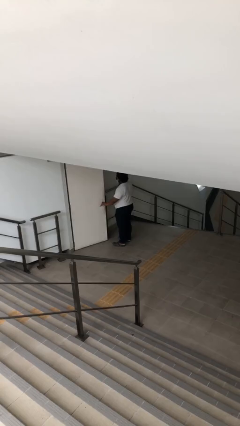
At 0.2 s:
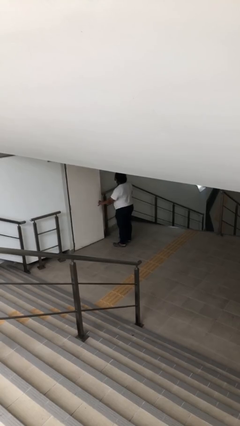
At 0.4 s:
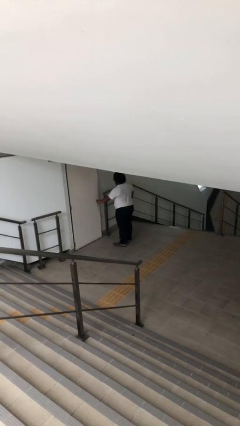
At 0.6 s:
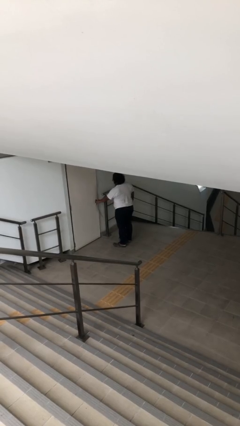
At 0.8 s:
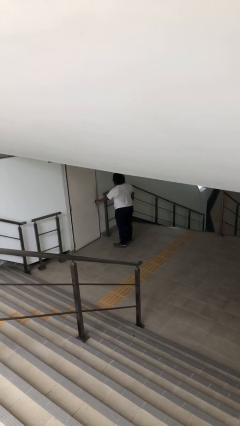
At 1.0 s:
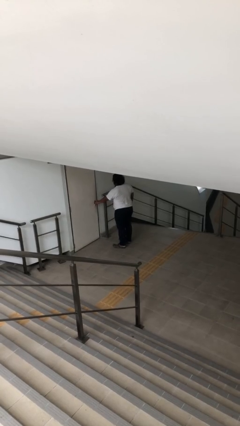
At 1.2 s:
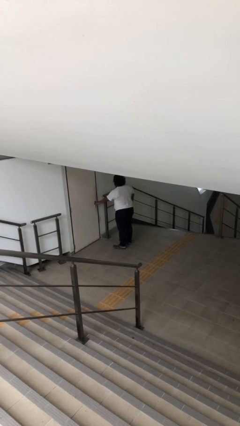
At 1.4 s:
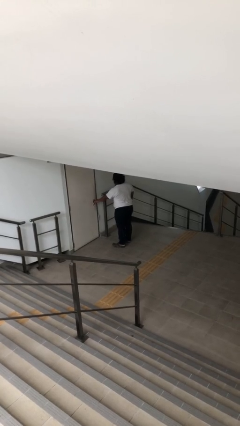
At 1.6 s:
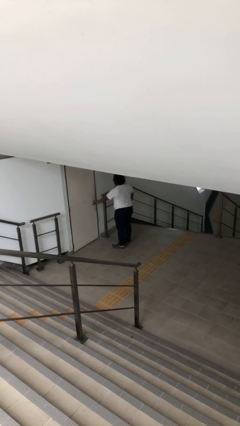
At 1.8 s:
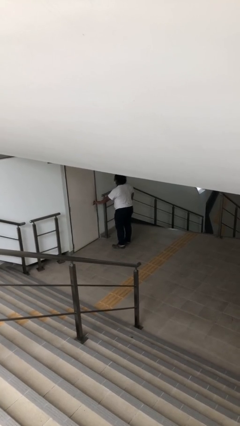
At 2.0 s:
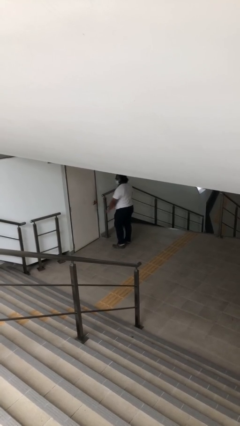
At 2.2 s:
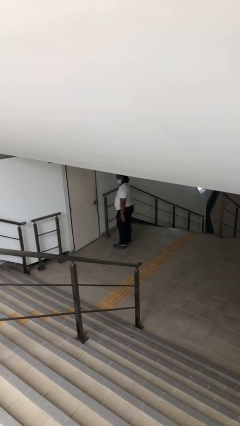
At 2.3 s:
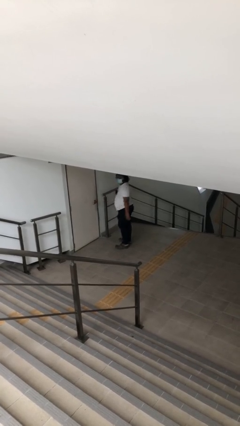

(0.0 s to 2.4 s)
person closes facility door

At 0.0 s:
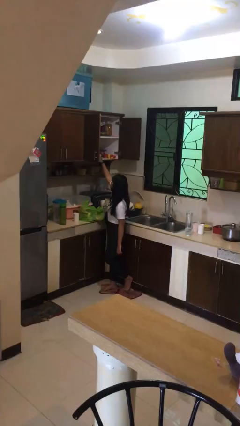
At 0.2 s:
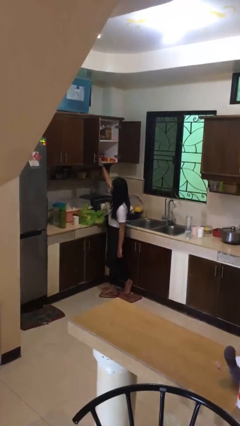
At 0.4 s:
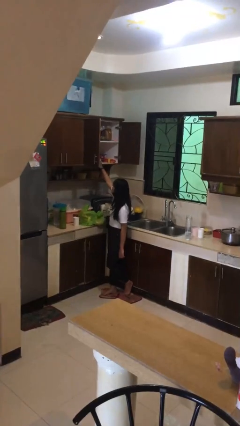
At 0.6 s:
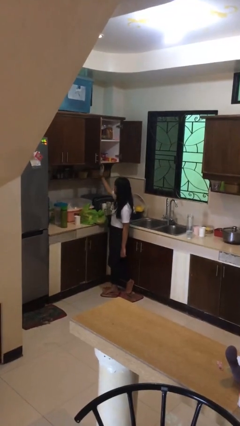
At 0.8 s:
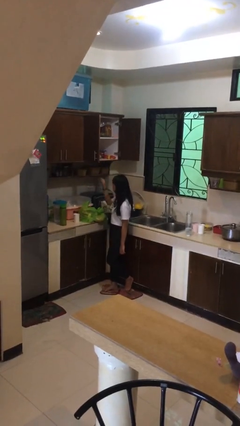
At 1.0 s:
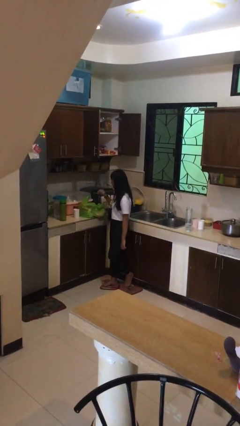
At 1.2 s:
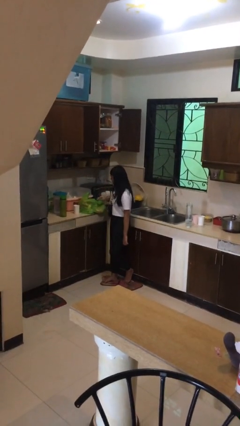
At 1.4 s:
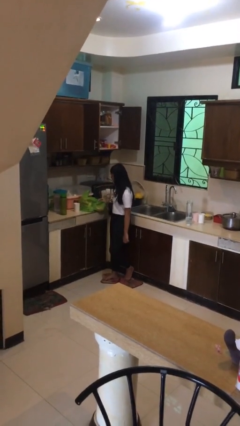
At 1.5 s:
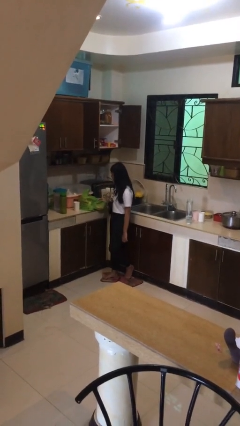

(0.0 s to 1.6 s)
person loads groceries into cabinet

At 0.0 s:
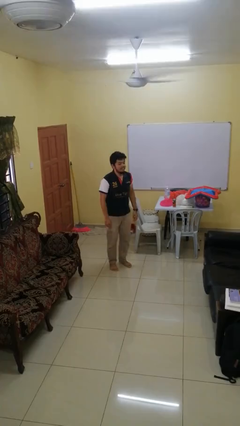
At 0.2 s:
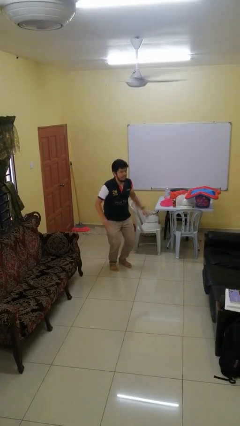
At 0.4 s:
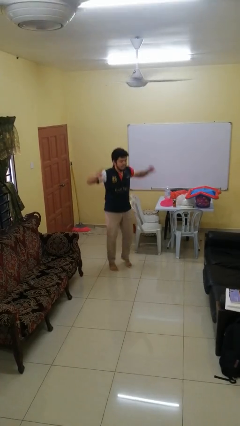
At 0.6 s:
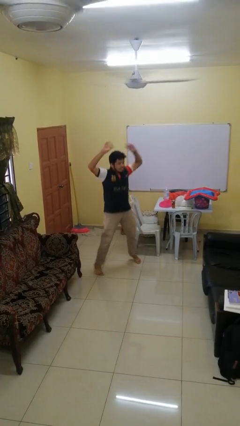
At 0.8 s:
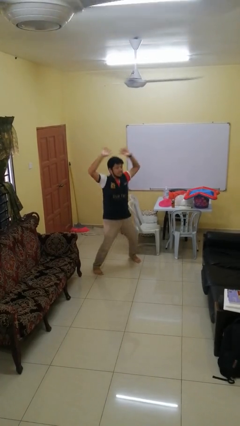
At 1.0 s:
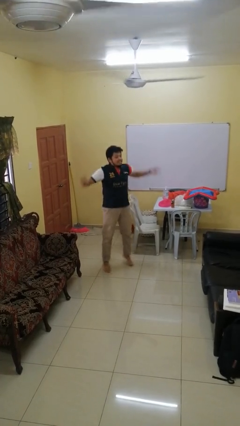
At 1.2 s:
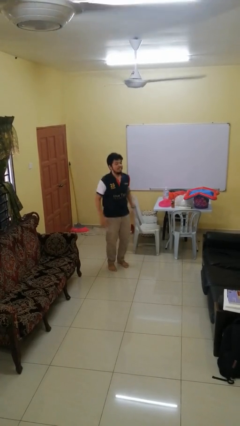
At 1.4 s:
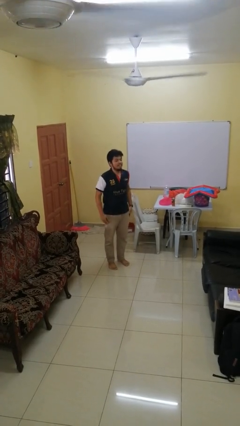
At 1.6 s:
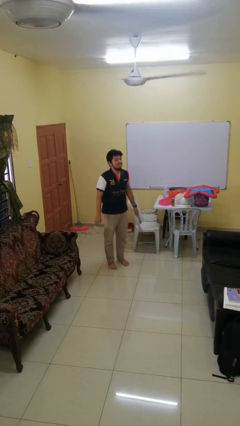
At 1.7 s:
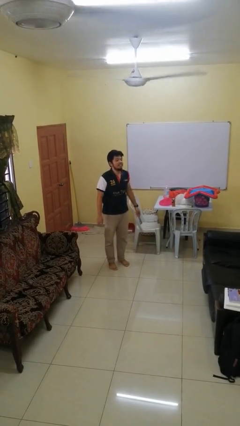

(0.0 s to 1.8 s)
person exercises with jumping jacks

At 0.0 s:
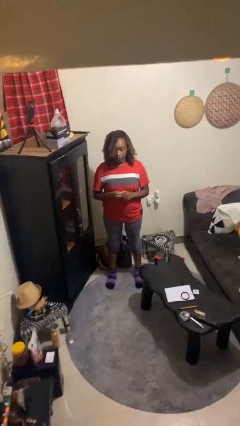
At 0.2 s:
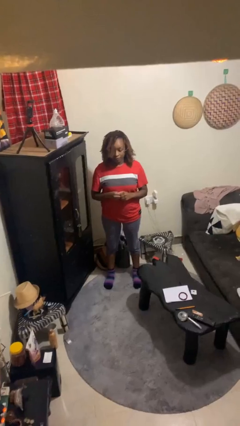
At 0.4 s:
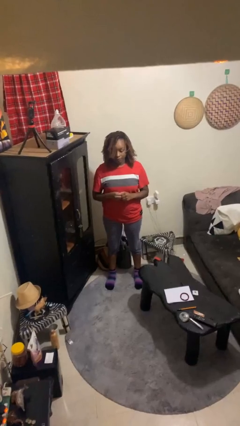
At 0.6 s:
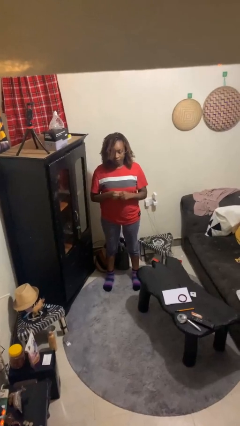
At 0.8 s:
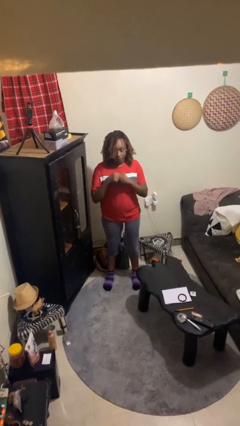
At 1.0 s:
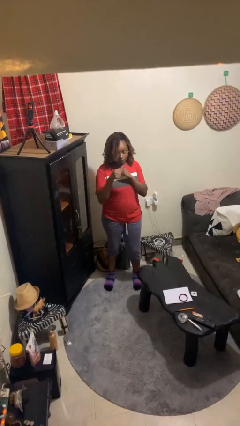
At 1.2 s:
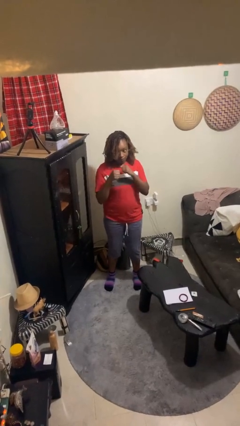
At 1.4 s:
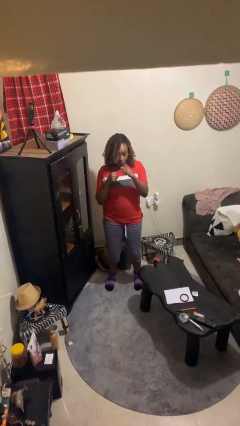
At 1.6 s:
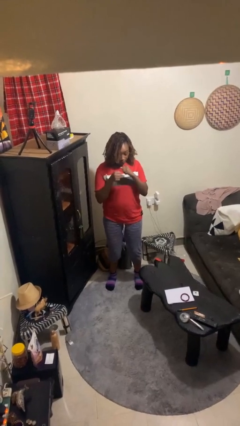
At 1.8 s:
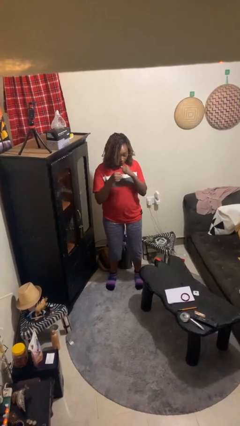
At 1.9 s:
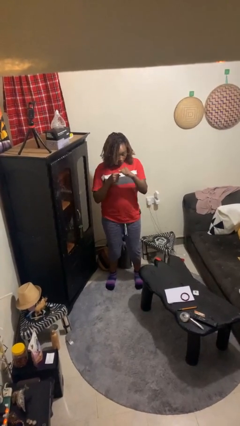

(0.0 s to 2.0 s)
person punches

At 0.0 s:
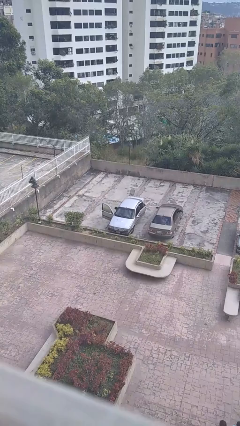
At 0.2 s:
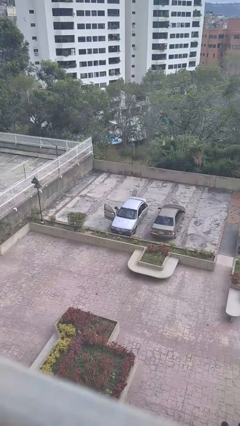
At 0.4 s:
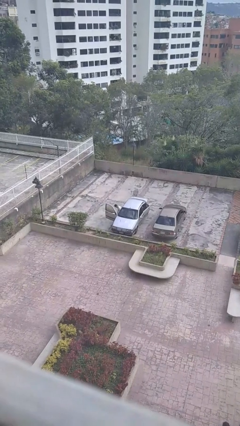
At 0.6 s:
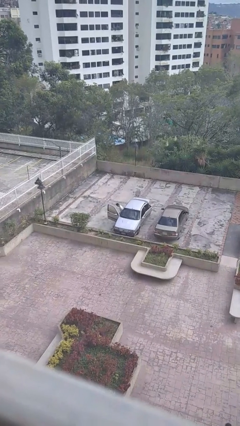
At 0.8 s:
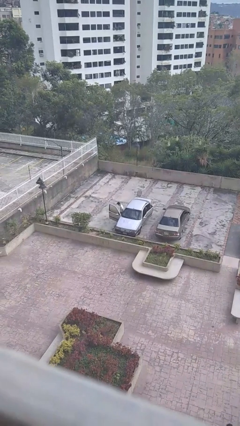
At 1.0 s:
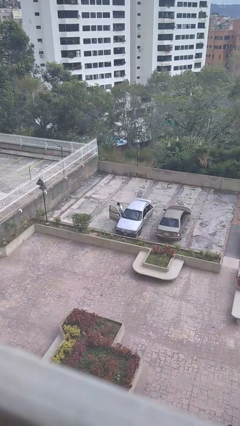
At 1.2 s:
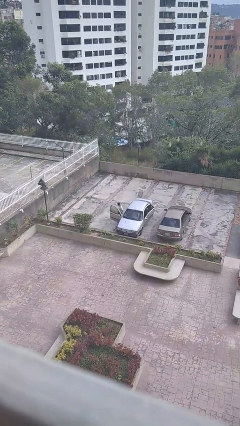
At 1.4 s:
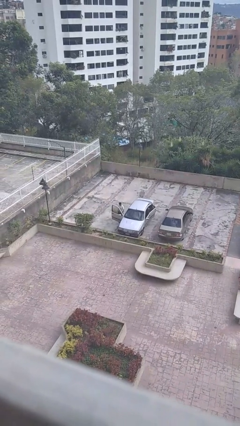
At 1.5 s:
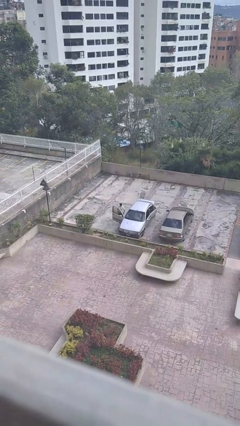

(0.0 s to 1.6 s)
person exits car

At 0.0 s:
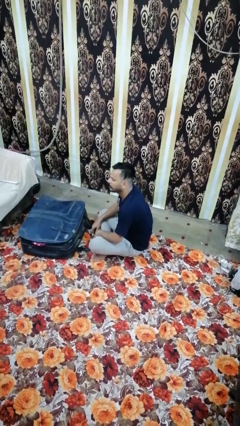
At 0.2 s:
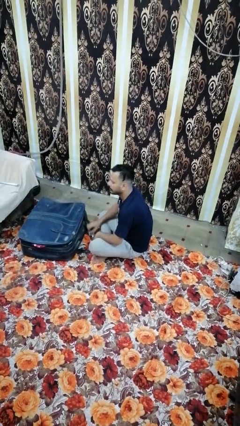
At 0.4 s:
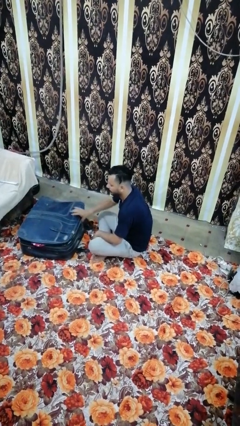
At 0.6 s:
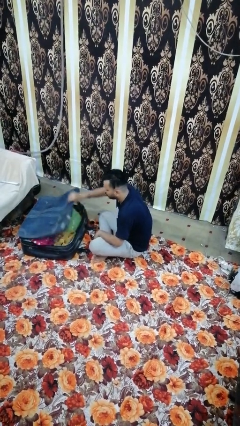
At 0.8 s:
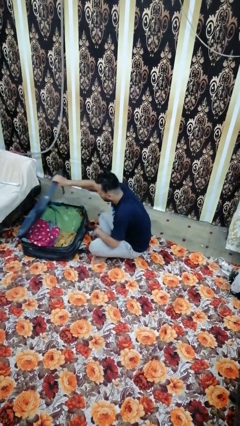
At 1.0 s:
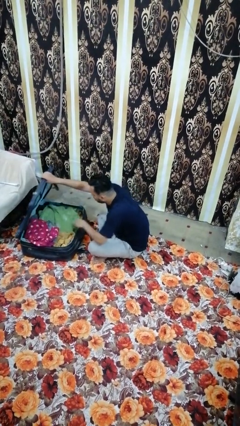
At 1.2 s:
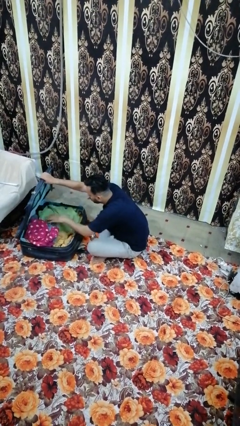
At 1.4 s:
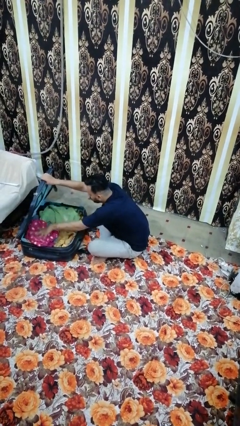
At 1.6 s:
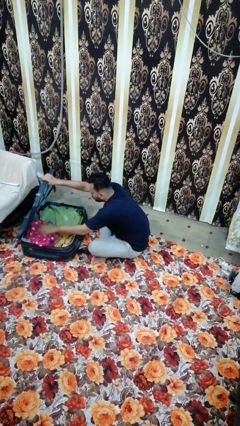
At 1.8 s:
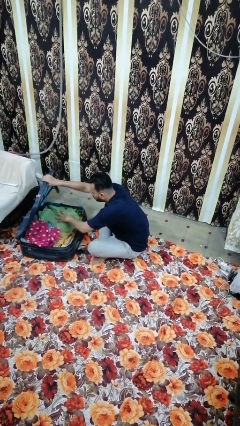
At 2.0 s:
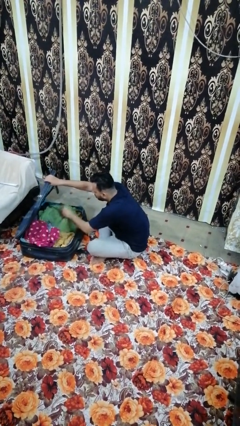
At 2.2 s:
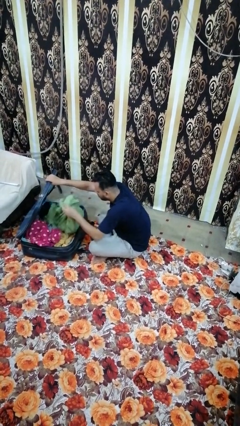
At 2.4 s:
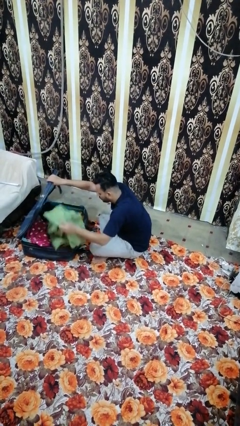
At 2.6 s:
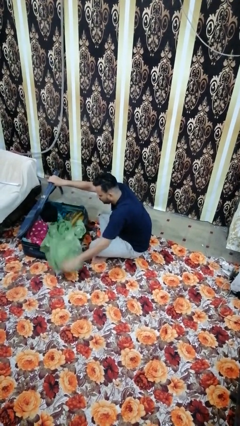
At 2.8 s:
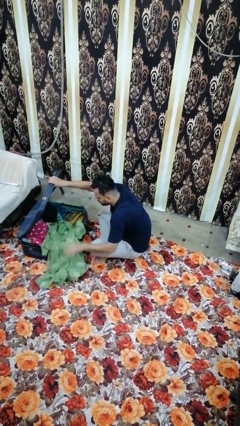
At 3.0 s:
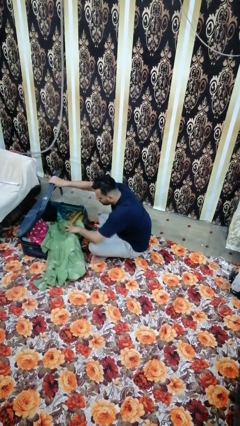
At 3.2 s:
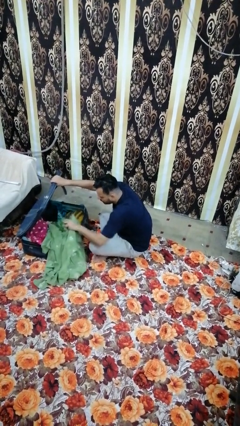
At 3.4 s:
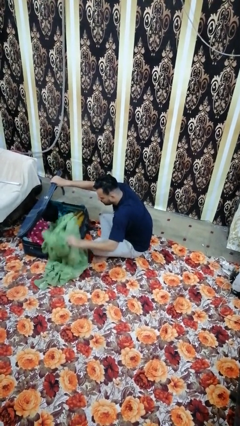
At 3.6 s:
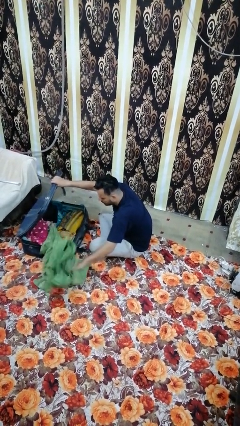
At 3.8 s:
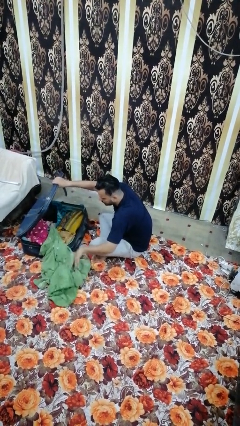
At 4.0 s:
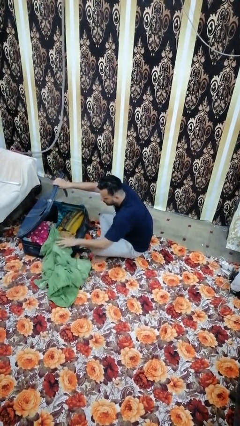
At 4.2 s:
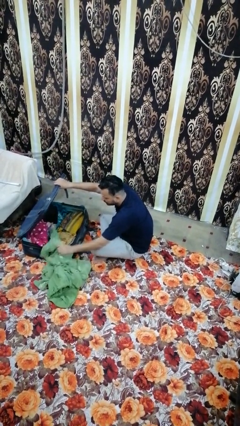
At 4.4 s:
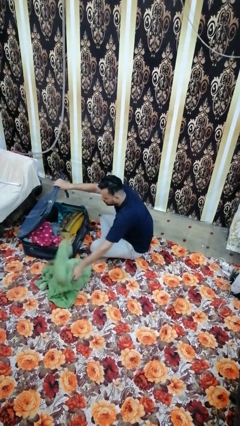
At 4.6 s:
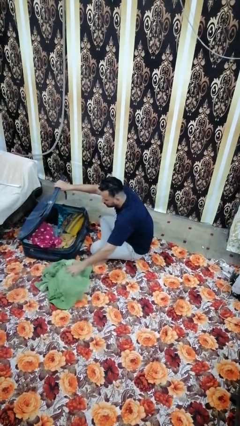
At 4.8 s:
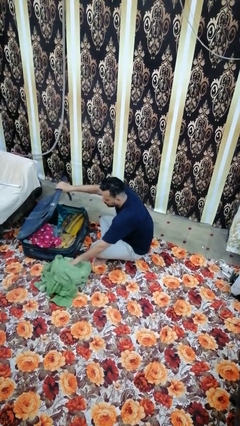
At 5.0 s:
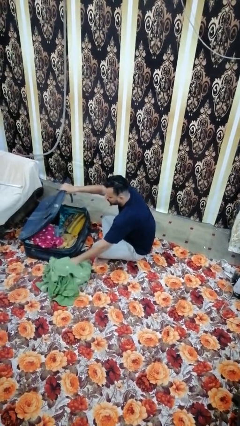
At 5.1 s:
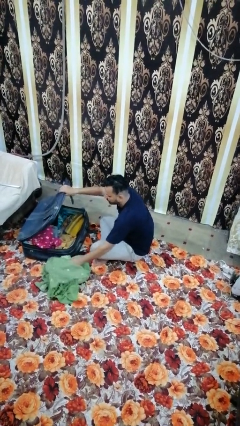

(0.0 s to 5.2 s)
person unloads clothes from suitcase

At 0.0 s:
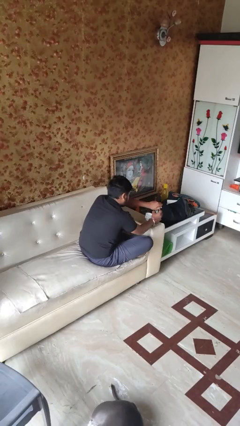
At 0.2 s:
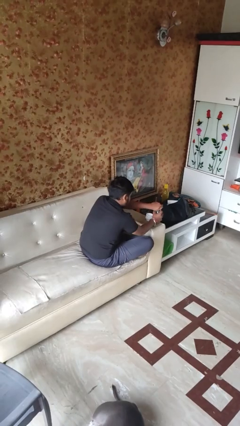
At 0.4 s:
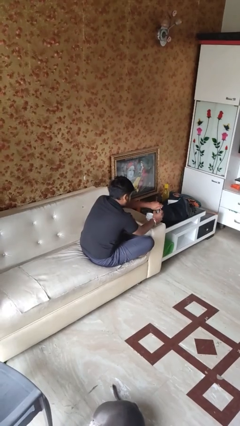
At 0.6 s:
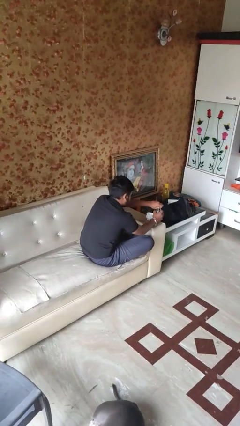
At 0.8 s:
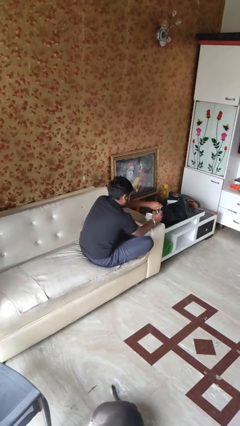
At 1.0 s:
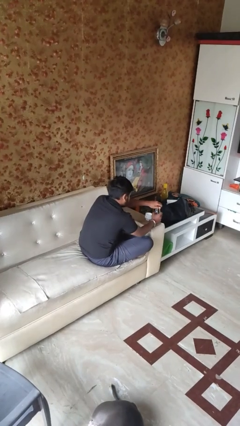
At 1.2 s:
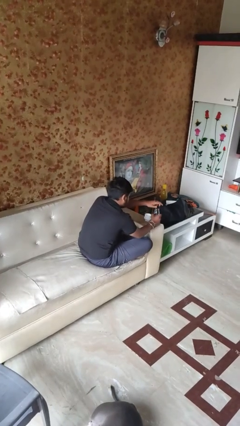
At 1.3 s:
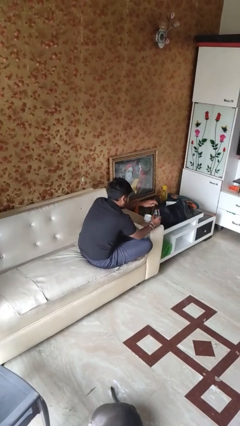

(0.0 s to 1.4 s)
person screws lid to bottle

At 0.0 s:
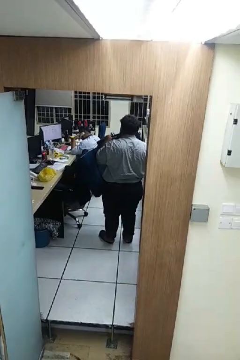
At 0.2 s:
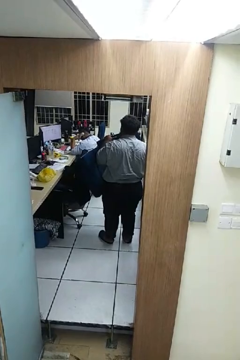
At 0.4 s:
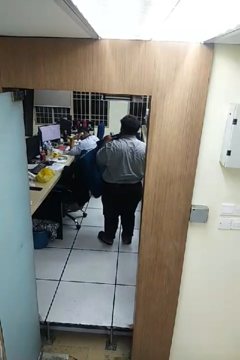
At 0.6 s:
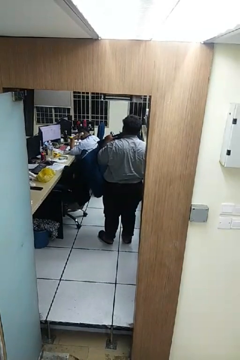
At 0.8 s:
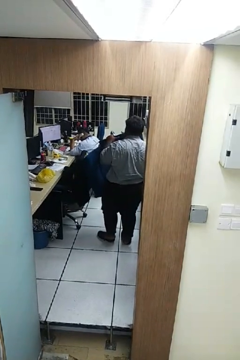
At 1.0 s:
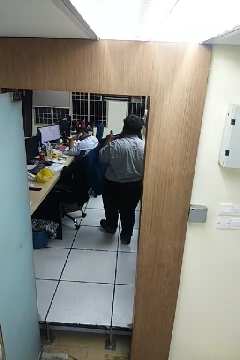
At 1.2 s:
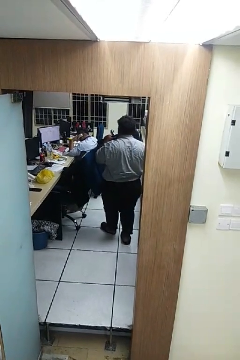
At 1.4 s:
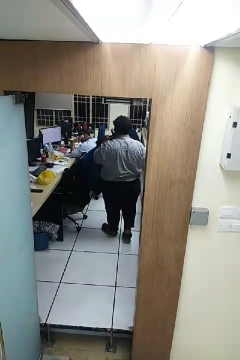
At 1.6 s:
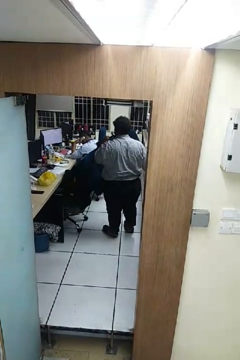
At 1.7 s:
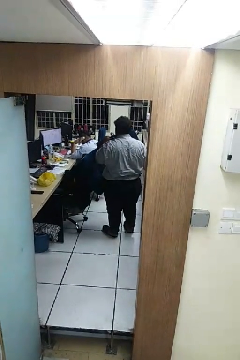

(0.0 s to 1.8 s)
person carries furniture
